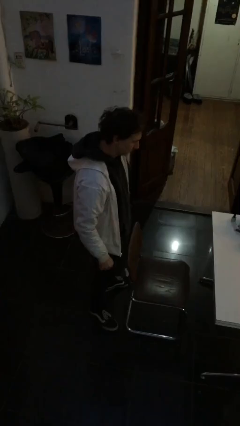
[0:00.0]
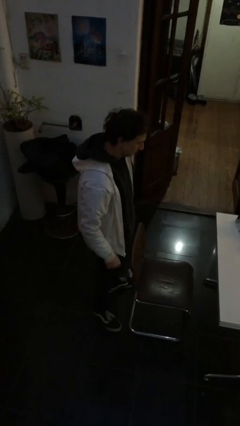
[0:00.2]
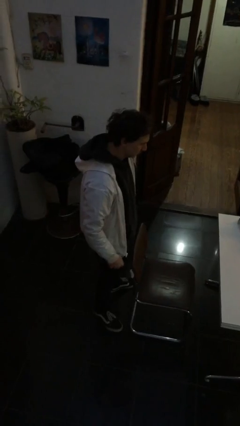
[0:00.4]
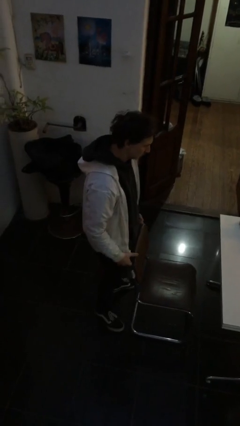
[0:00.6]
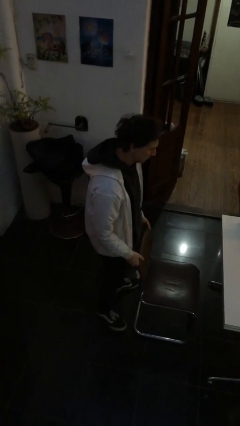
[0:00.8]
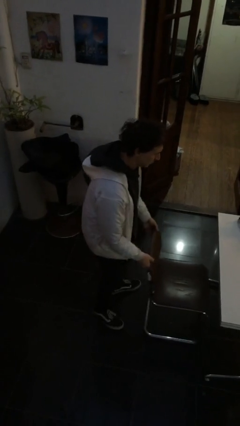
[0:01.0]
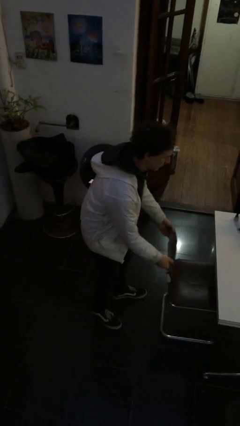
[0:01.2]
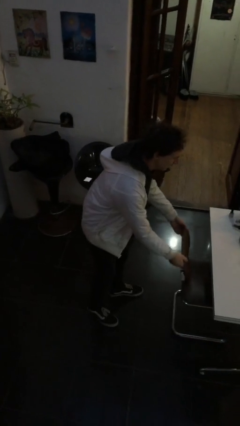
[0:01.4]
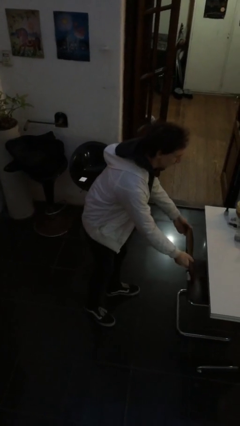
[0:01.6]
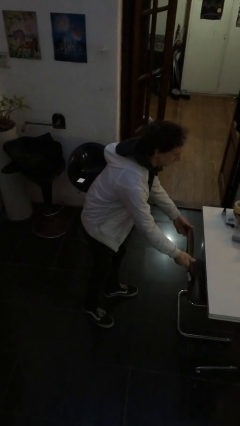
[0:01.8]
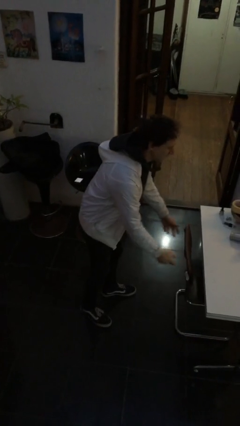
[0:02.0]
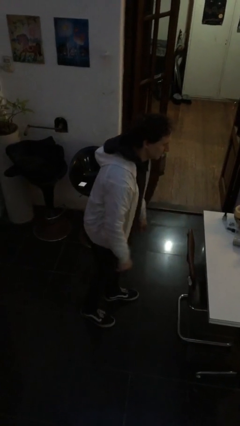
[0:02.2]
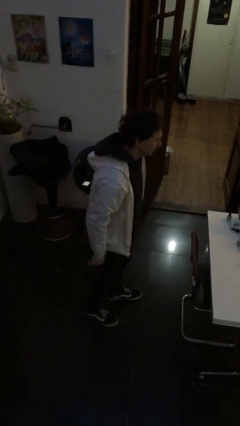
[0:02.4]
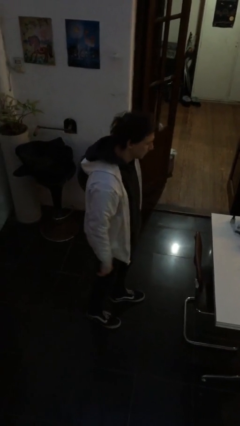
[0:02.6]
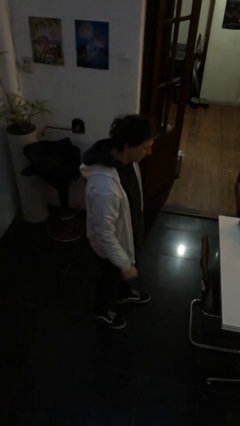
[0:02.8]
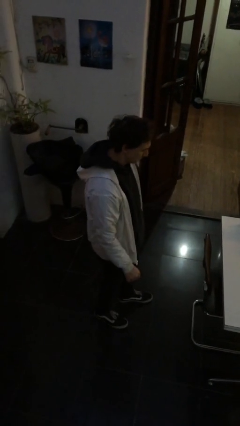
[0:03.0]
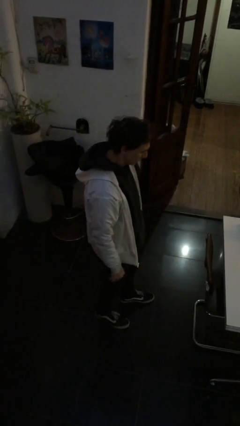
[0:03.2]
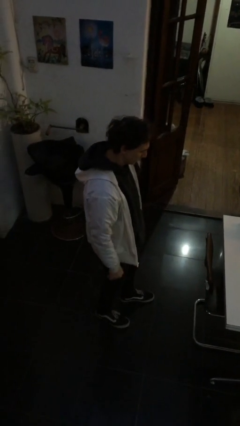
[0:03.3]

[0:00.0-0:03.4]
person pushes in chair

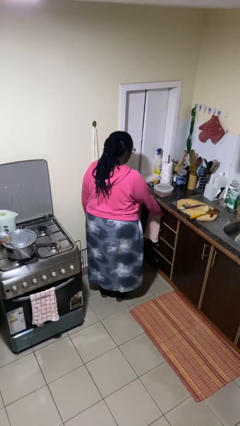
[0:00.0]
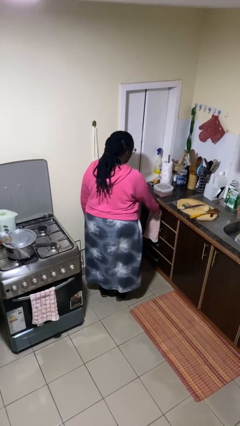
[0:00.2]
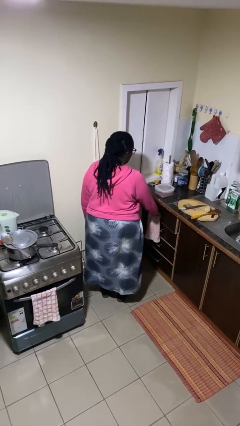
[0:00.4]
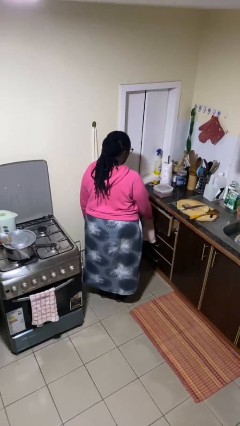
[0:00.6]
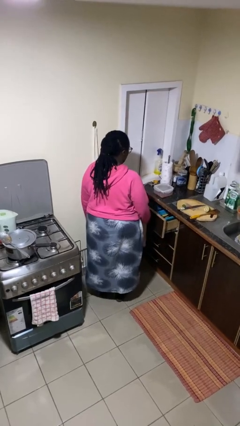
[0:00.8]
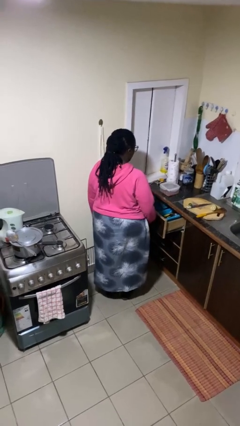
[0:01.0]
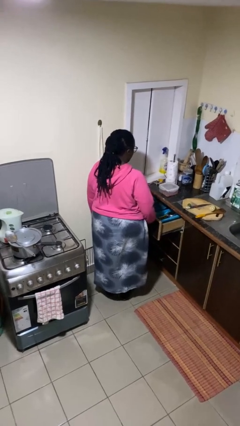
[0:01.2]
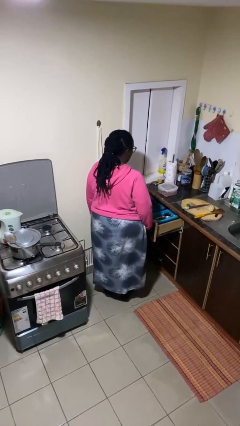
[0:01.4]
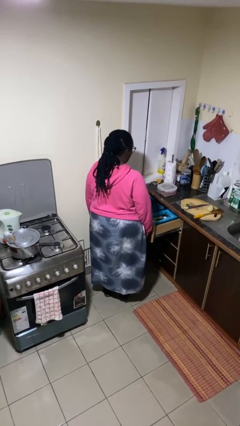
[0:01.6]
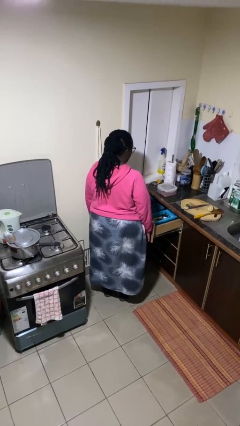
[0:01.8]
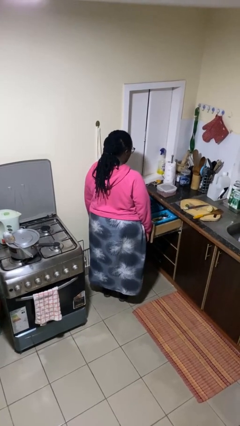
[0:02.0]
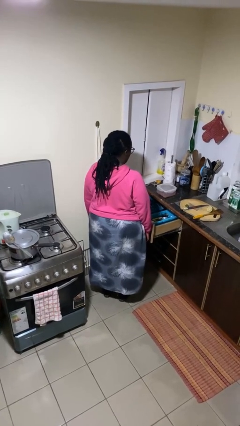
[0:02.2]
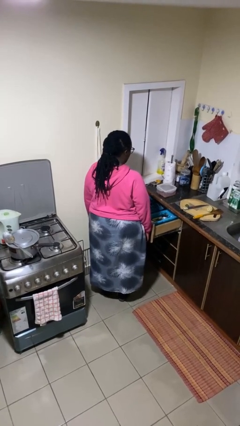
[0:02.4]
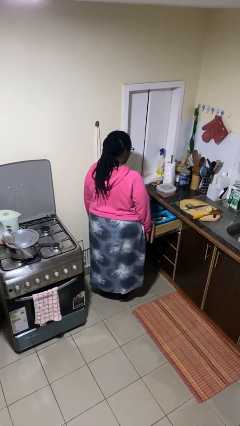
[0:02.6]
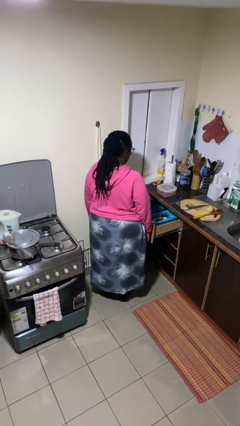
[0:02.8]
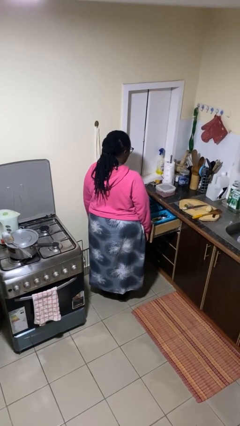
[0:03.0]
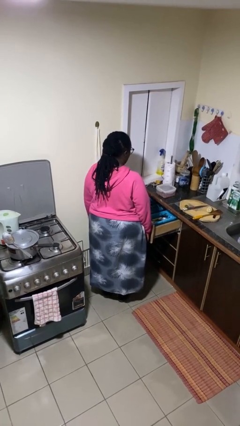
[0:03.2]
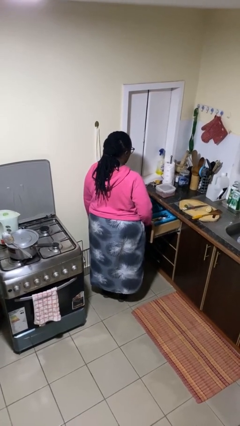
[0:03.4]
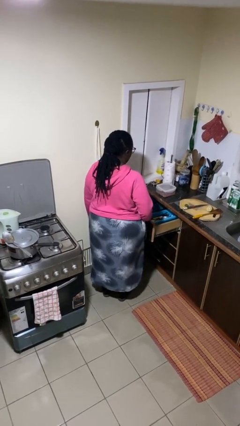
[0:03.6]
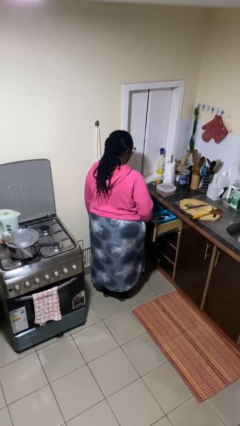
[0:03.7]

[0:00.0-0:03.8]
person opens kitchen drawer

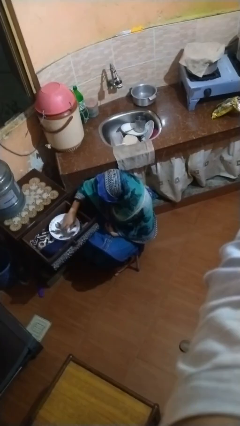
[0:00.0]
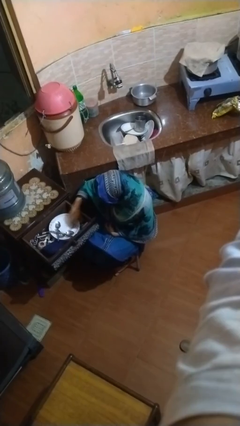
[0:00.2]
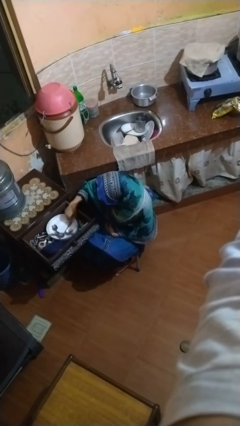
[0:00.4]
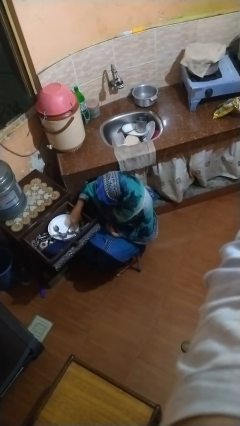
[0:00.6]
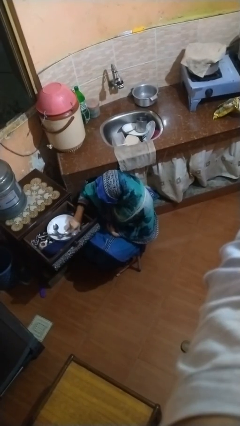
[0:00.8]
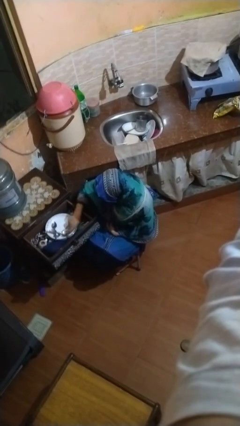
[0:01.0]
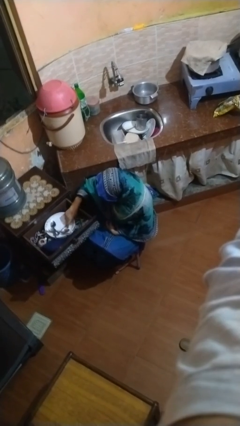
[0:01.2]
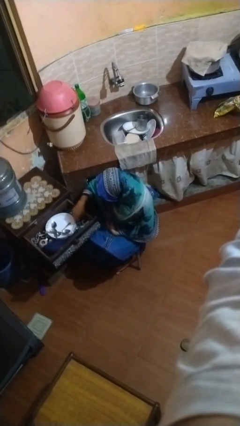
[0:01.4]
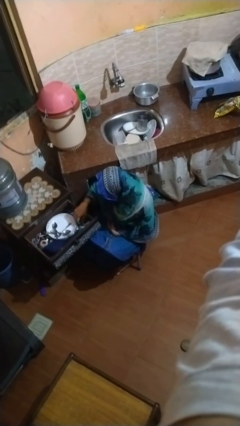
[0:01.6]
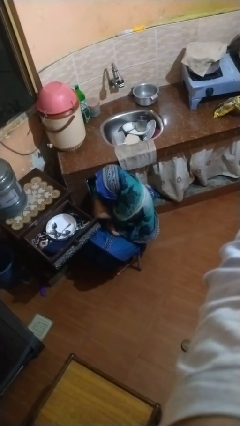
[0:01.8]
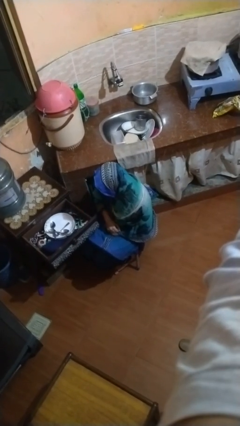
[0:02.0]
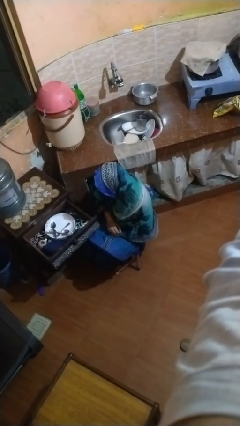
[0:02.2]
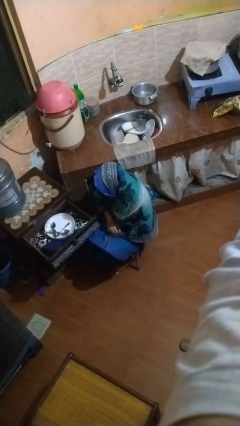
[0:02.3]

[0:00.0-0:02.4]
person searches in kitchen drawer

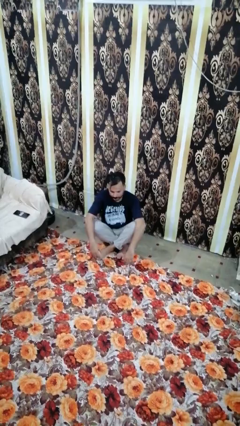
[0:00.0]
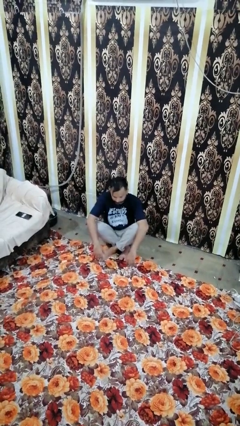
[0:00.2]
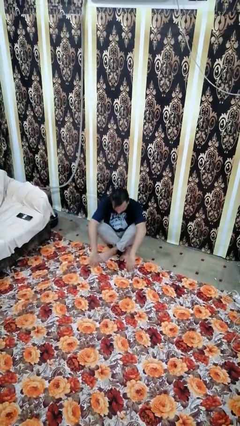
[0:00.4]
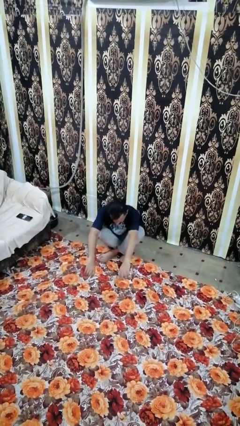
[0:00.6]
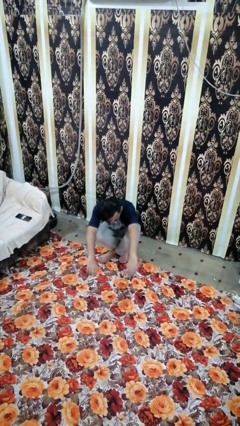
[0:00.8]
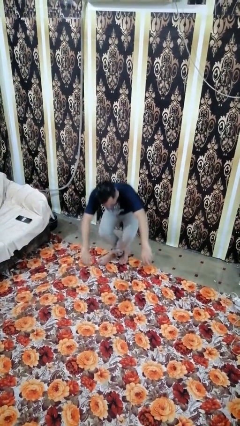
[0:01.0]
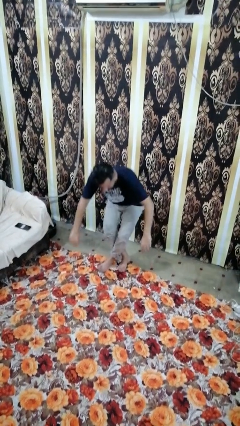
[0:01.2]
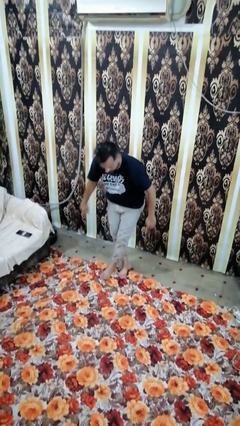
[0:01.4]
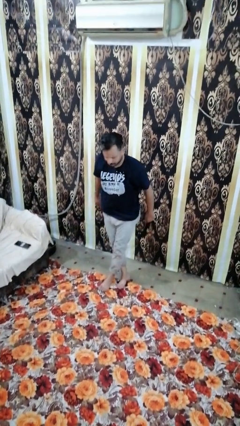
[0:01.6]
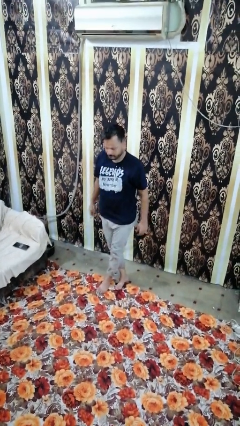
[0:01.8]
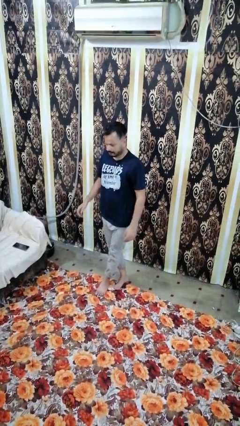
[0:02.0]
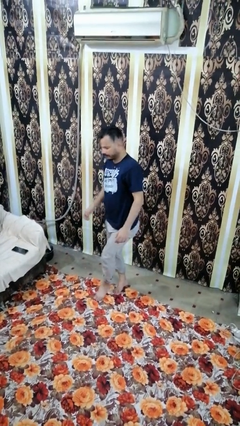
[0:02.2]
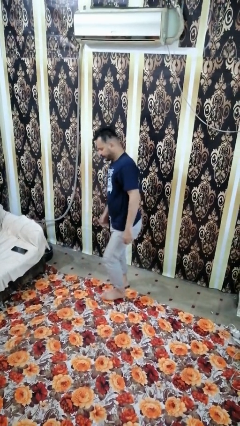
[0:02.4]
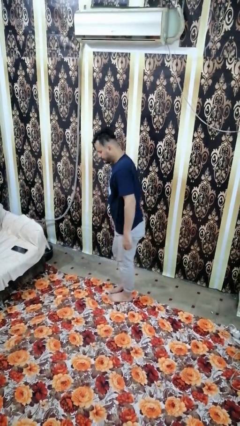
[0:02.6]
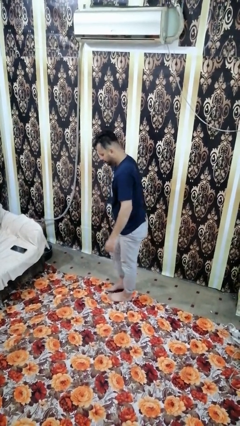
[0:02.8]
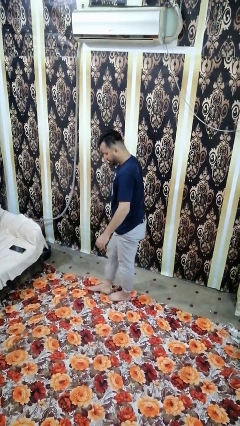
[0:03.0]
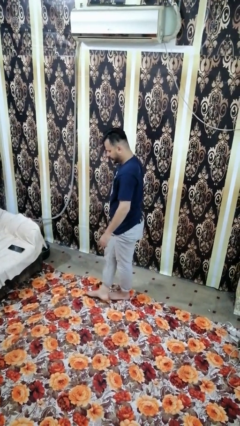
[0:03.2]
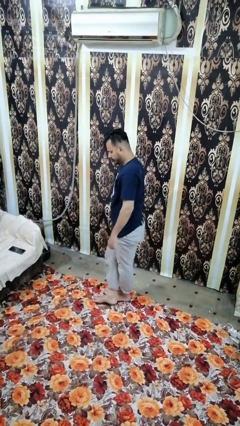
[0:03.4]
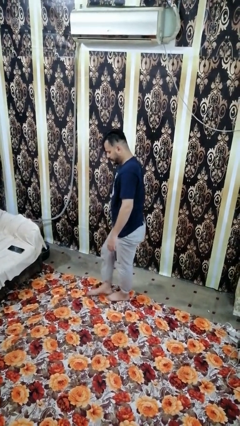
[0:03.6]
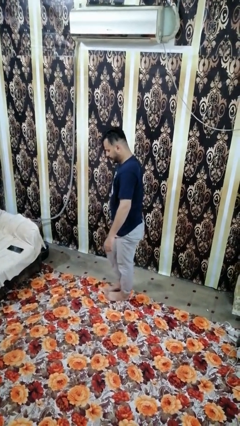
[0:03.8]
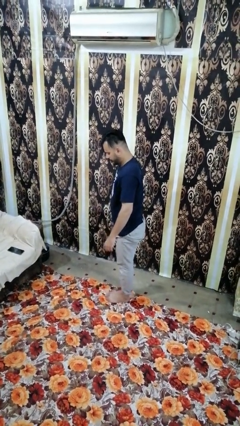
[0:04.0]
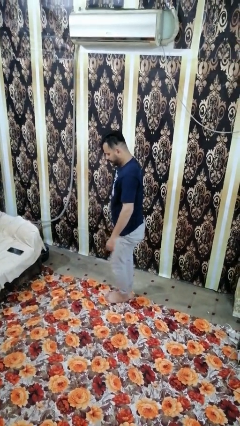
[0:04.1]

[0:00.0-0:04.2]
person stands up from floor

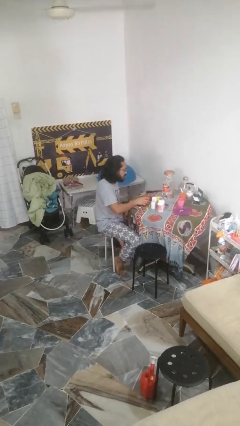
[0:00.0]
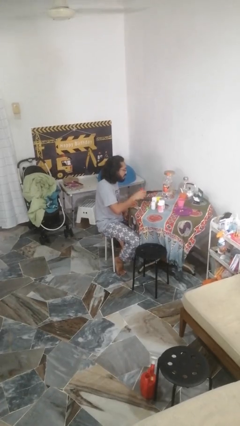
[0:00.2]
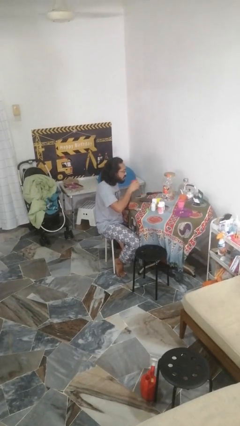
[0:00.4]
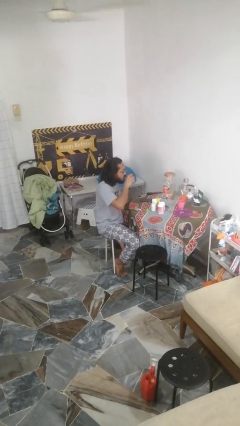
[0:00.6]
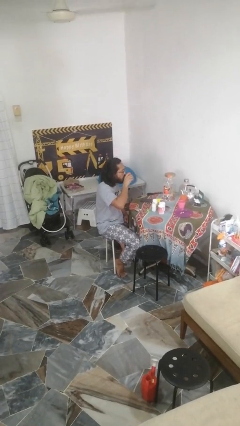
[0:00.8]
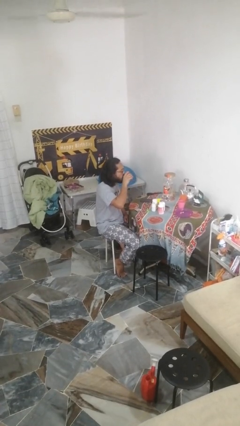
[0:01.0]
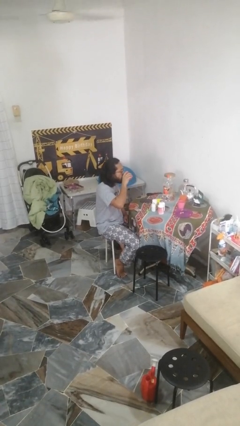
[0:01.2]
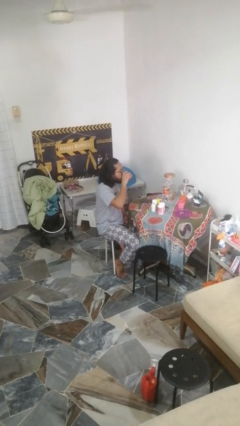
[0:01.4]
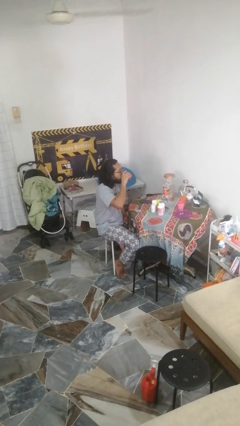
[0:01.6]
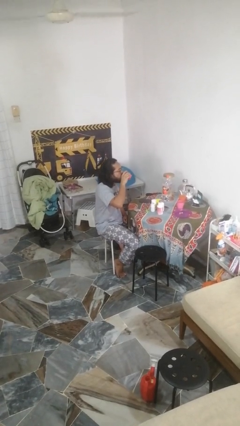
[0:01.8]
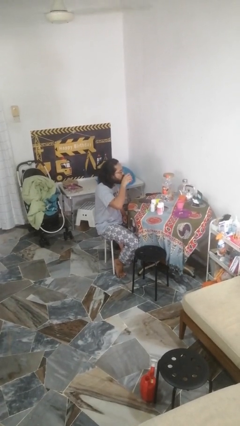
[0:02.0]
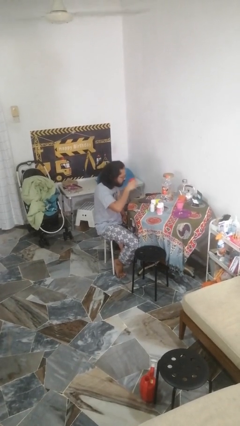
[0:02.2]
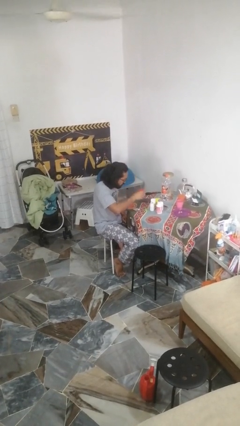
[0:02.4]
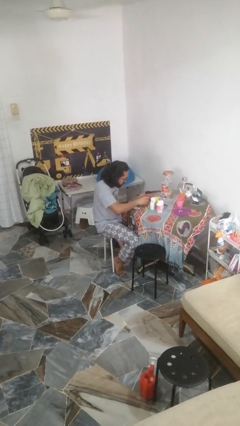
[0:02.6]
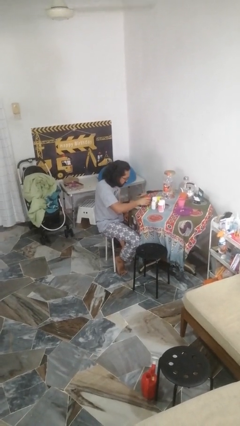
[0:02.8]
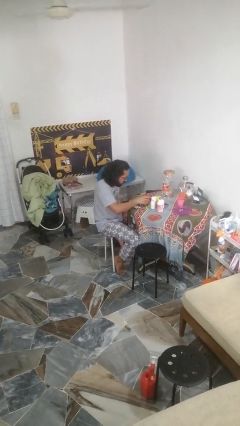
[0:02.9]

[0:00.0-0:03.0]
person drinks from cup

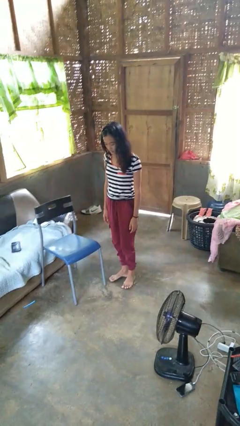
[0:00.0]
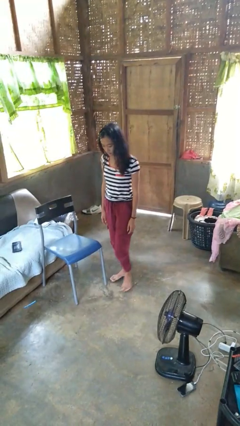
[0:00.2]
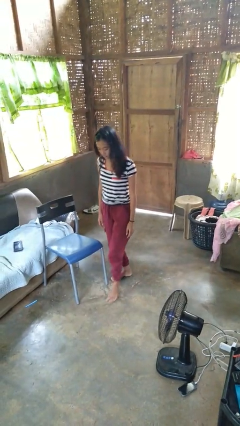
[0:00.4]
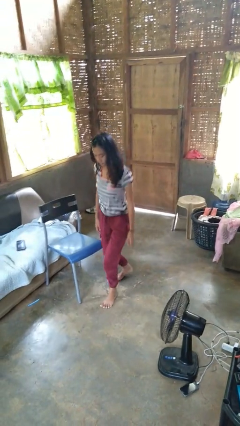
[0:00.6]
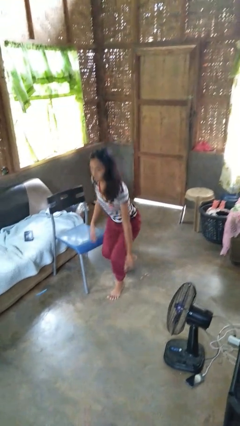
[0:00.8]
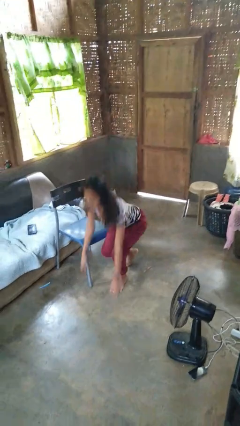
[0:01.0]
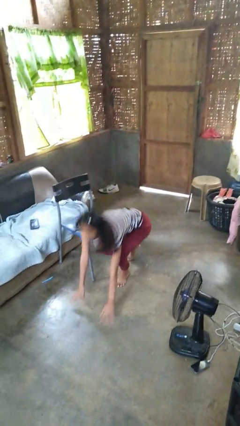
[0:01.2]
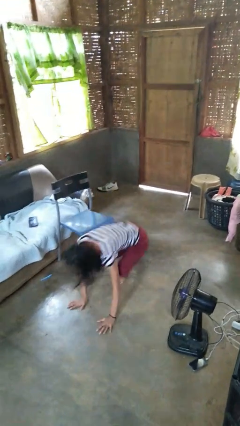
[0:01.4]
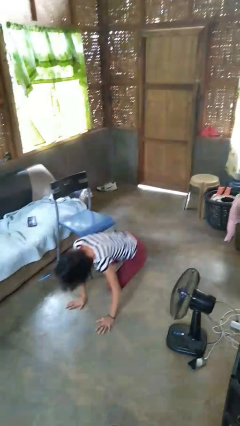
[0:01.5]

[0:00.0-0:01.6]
person trips on object on floor
